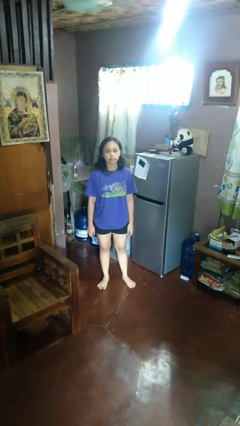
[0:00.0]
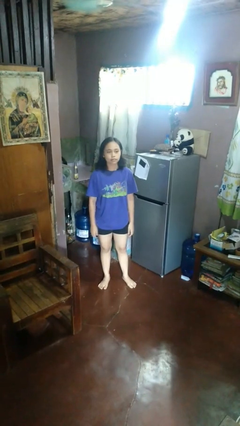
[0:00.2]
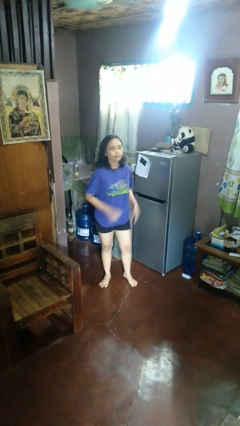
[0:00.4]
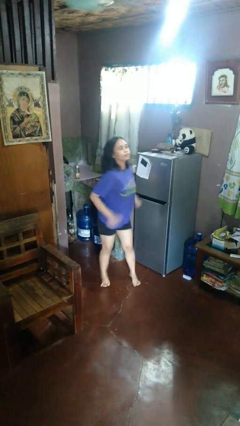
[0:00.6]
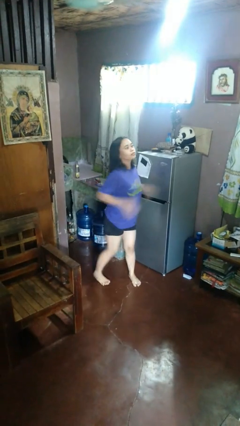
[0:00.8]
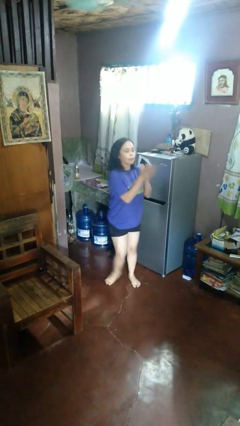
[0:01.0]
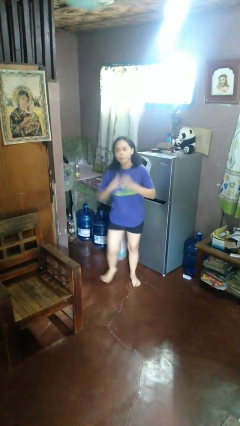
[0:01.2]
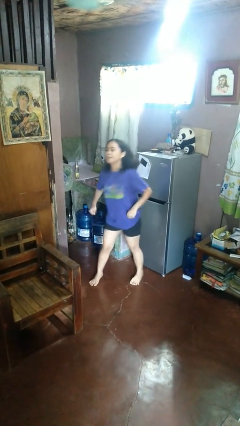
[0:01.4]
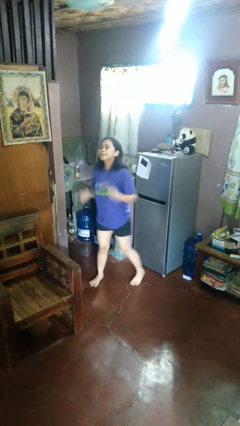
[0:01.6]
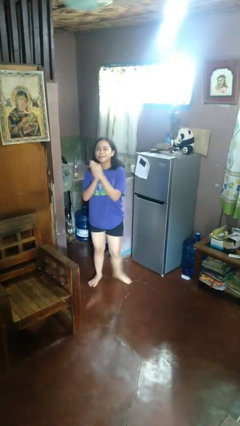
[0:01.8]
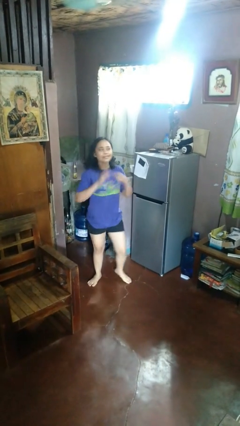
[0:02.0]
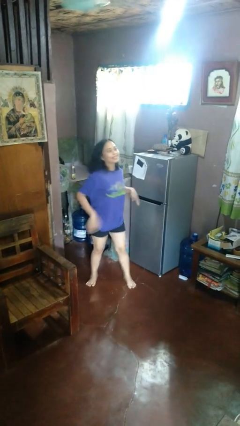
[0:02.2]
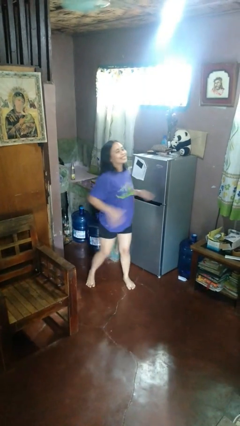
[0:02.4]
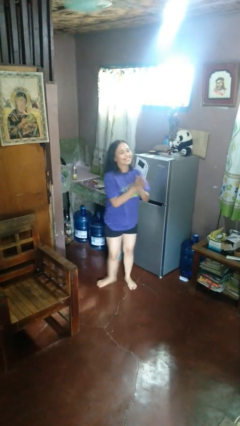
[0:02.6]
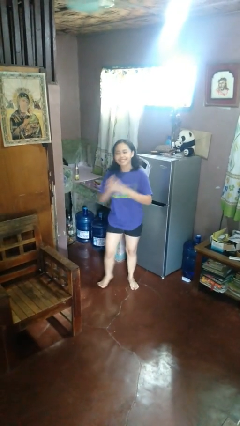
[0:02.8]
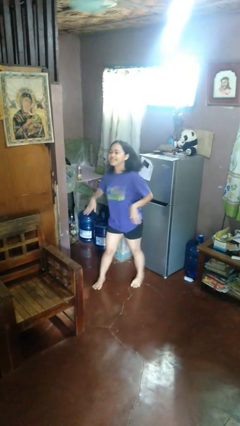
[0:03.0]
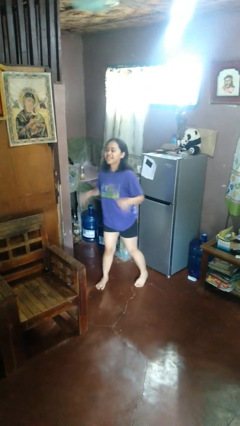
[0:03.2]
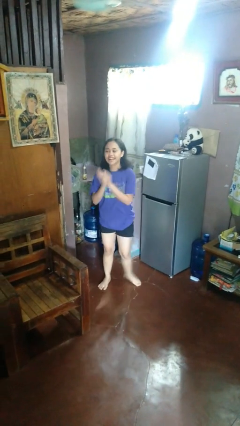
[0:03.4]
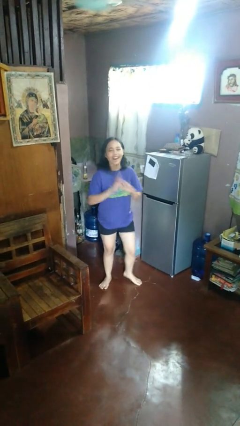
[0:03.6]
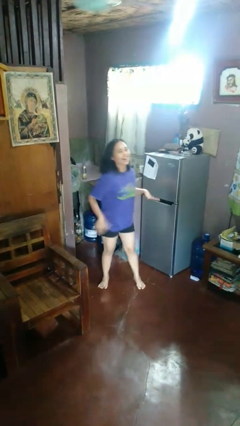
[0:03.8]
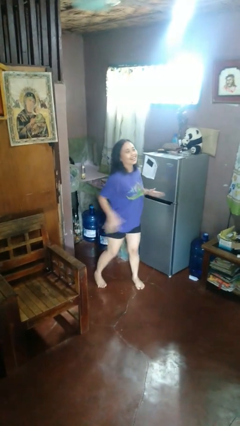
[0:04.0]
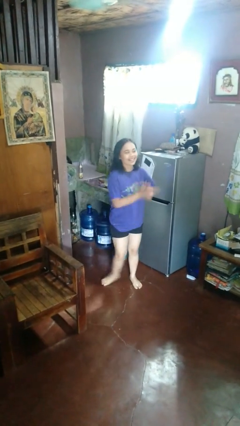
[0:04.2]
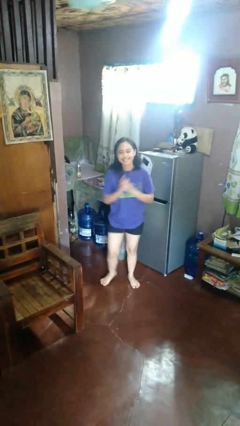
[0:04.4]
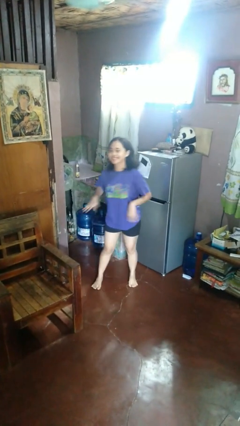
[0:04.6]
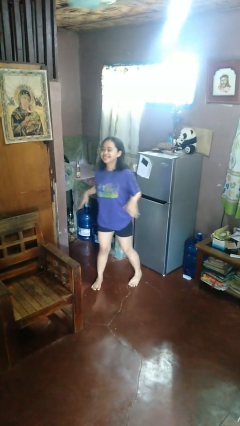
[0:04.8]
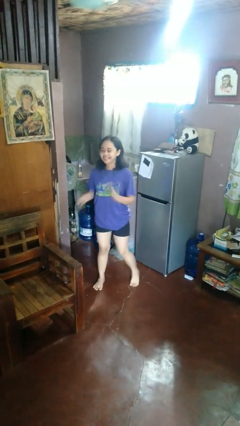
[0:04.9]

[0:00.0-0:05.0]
person dances in place

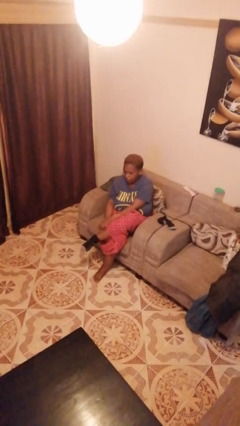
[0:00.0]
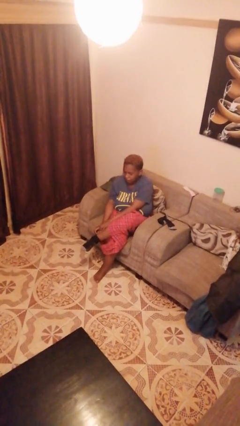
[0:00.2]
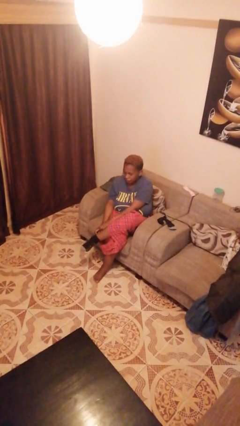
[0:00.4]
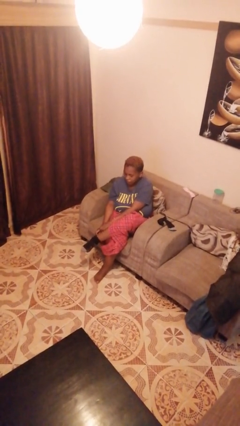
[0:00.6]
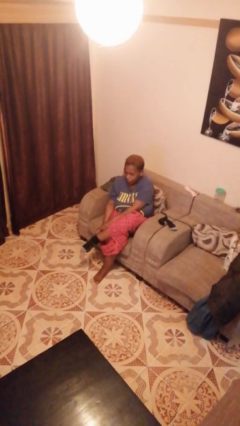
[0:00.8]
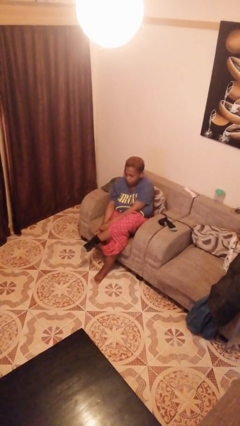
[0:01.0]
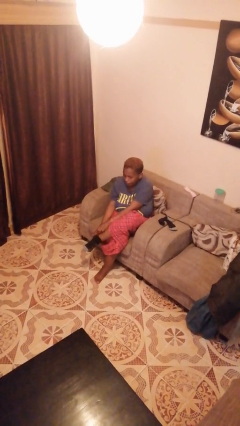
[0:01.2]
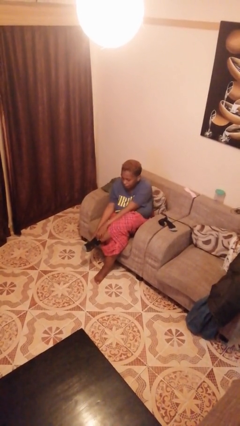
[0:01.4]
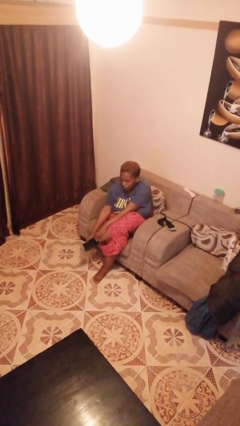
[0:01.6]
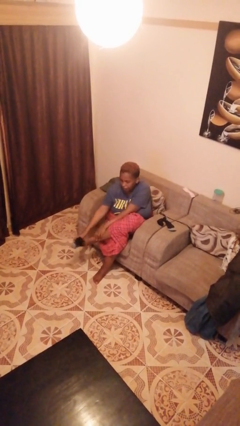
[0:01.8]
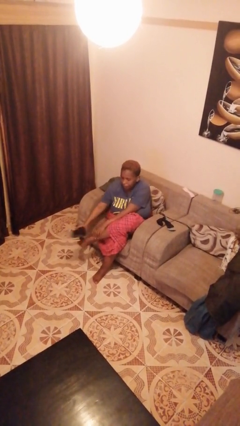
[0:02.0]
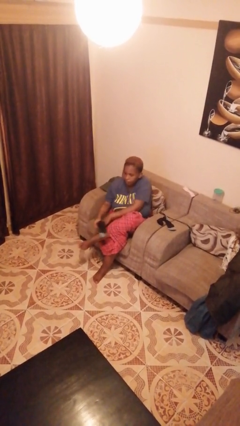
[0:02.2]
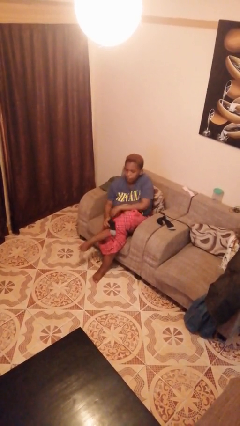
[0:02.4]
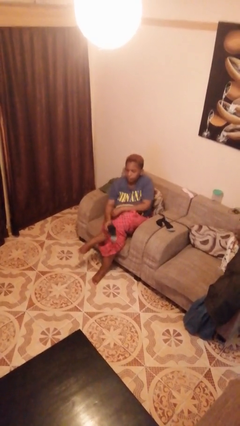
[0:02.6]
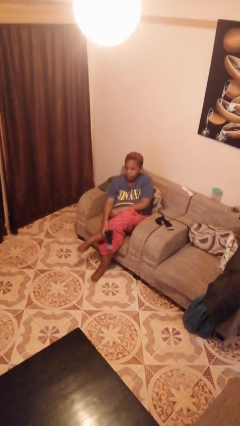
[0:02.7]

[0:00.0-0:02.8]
person takes off socks

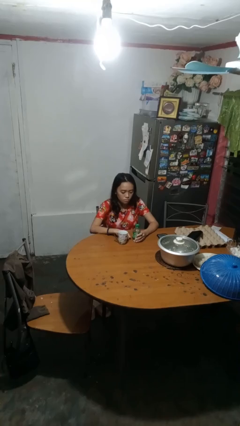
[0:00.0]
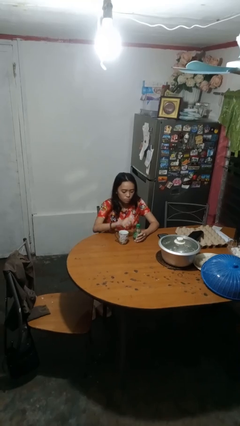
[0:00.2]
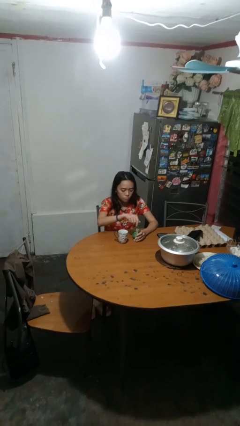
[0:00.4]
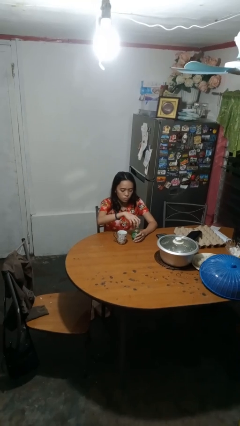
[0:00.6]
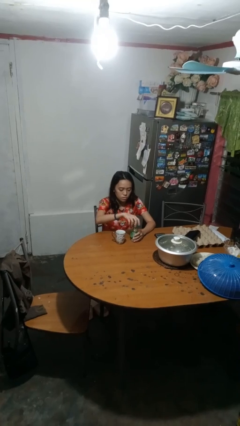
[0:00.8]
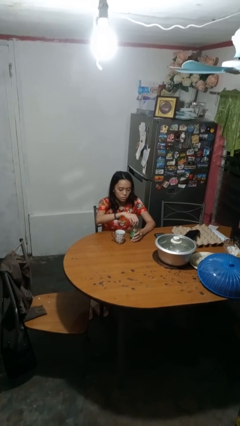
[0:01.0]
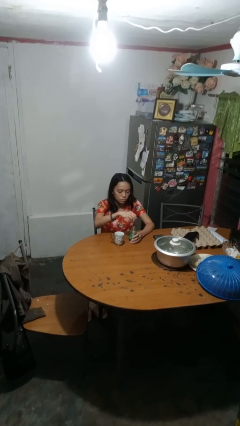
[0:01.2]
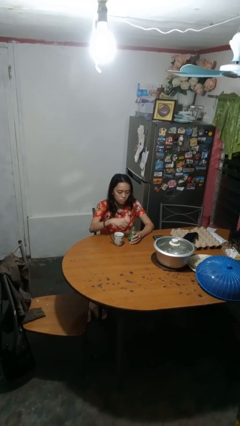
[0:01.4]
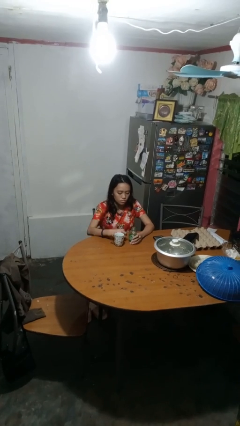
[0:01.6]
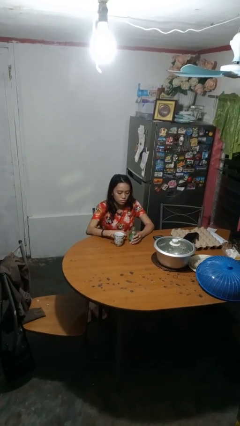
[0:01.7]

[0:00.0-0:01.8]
person unscrews lid from bottle

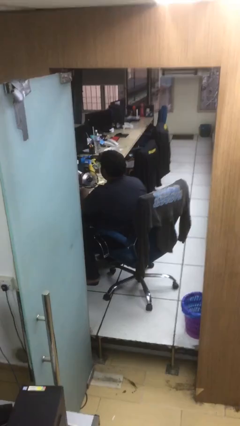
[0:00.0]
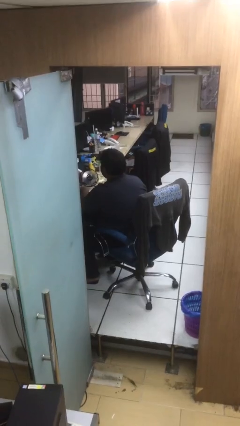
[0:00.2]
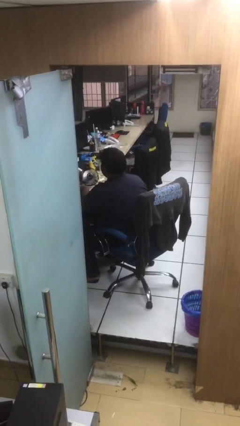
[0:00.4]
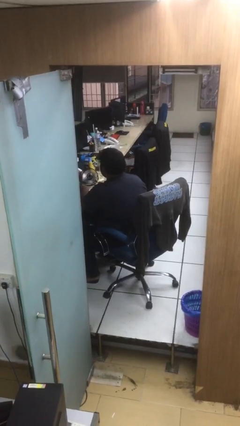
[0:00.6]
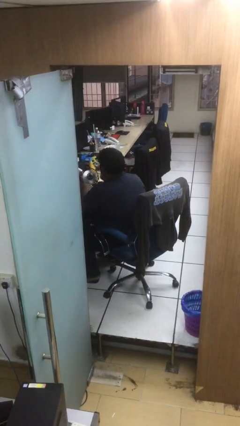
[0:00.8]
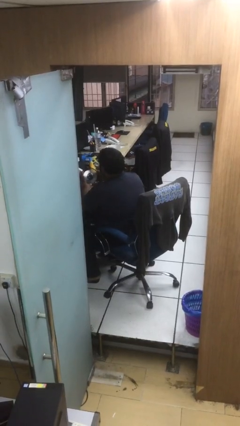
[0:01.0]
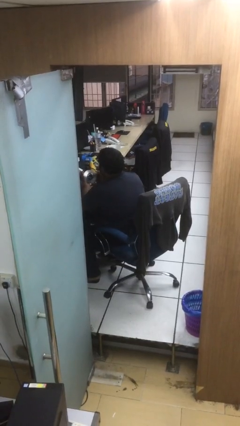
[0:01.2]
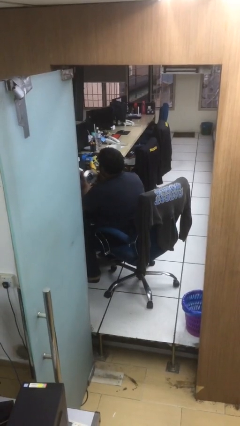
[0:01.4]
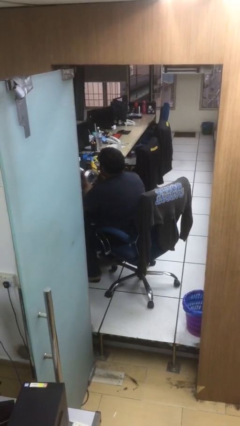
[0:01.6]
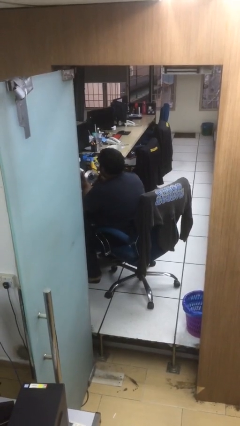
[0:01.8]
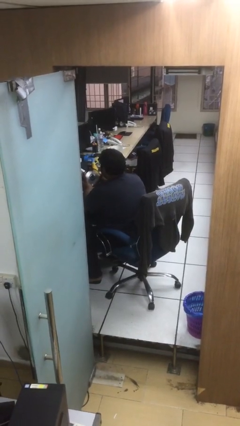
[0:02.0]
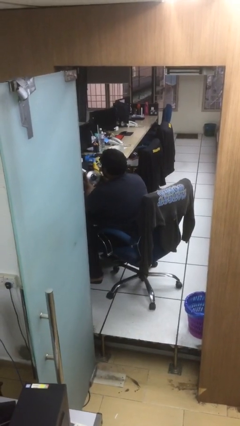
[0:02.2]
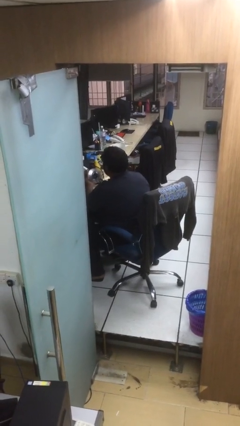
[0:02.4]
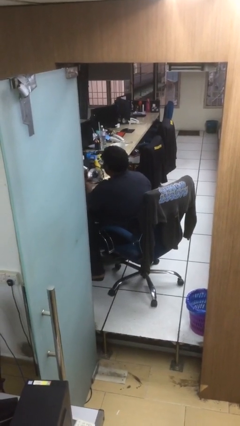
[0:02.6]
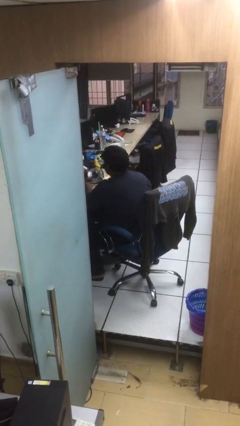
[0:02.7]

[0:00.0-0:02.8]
person turns off fan

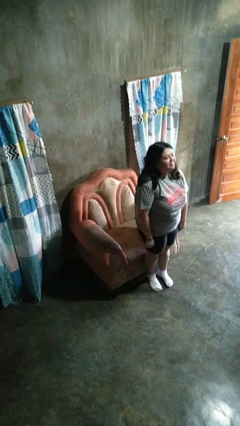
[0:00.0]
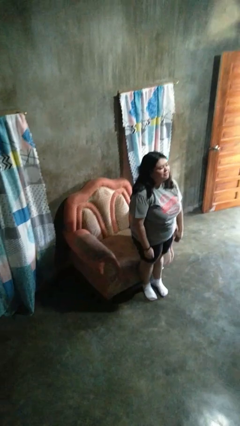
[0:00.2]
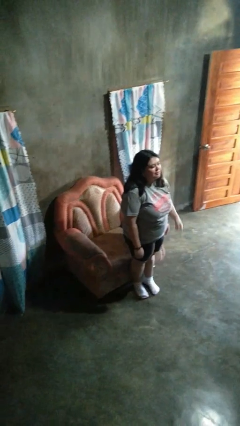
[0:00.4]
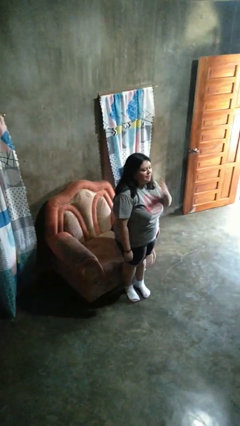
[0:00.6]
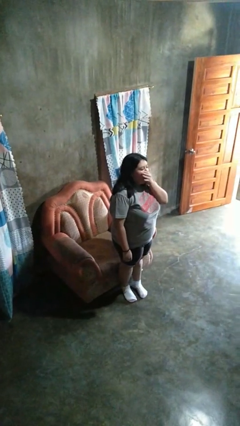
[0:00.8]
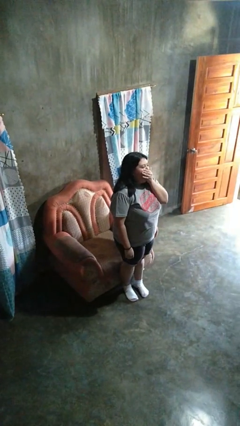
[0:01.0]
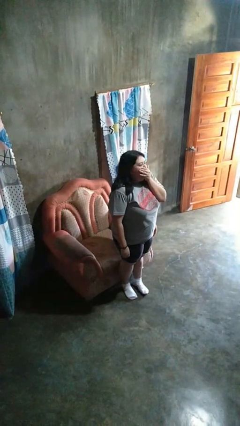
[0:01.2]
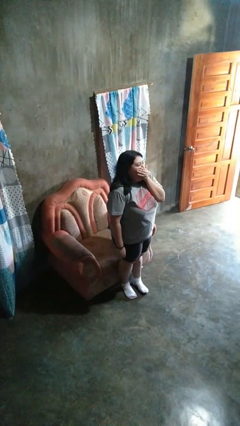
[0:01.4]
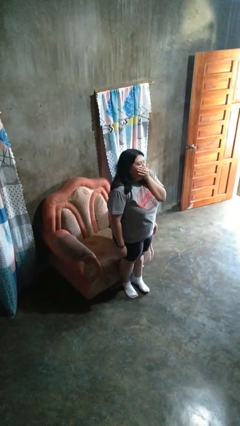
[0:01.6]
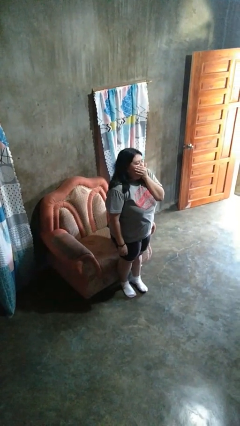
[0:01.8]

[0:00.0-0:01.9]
person yawns

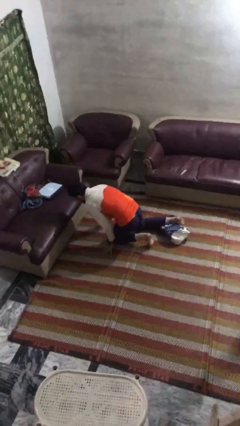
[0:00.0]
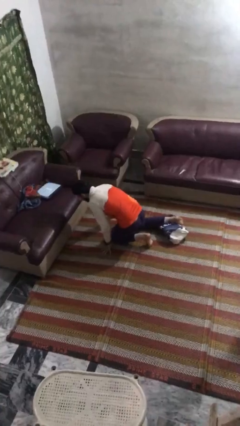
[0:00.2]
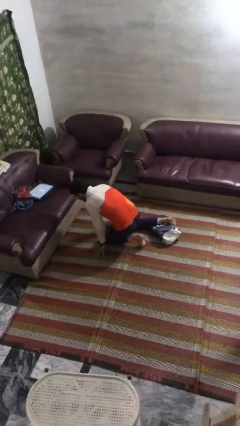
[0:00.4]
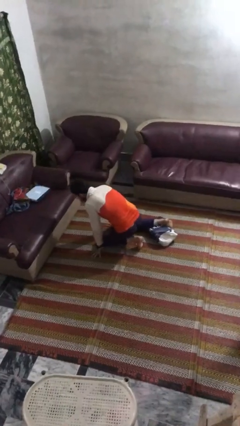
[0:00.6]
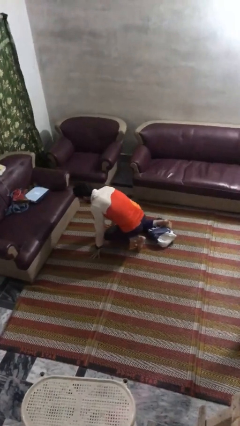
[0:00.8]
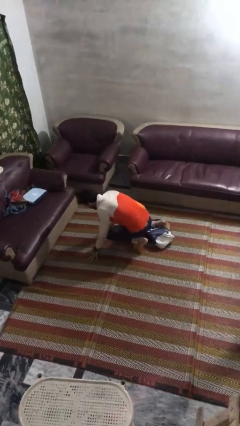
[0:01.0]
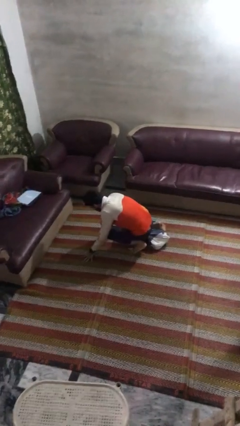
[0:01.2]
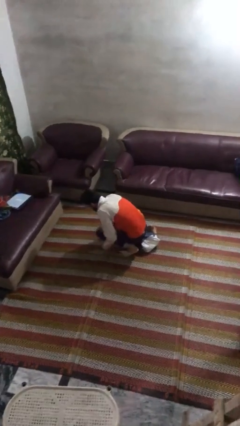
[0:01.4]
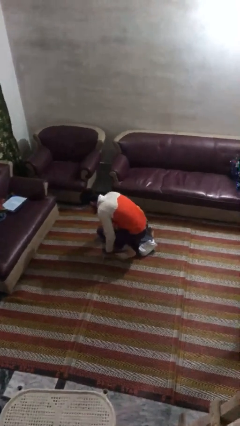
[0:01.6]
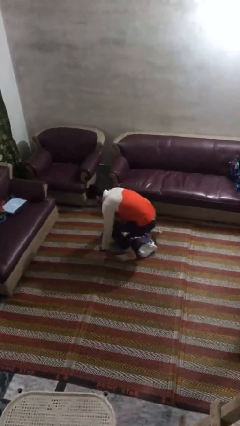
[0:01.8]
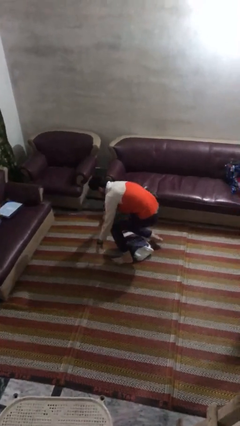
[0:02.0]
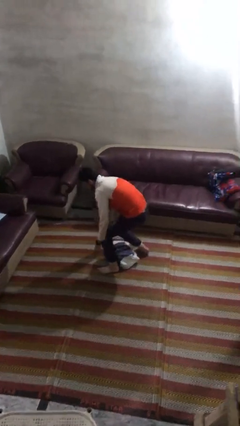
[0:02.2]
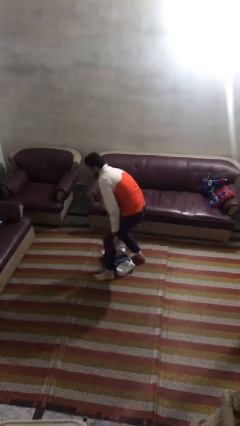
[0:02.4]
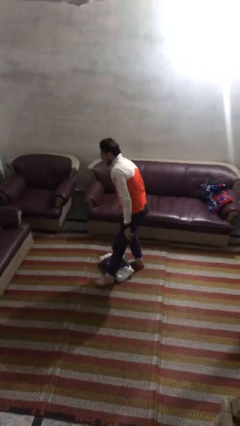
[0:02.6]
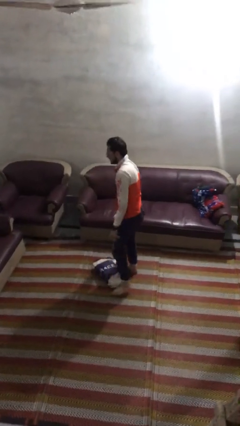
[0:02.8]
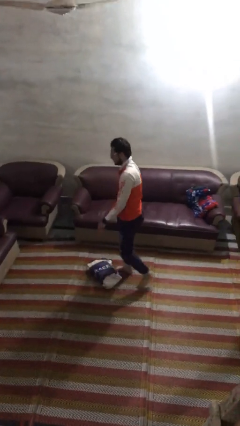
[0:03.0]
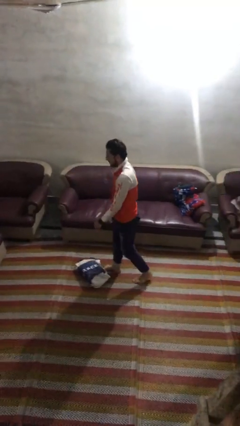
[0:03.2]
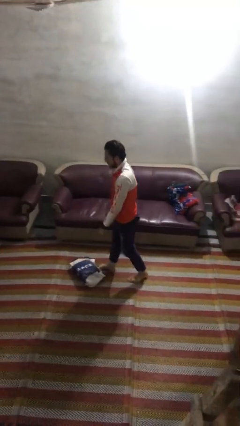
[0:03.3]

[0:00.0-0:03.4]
person stands up from floor
